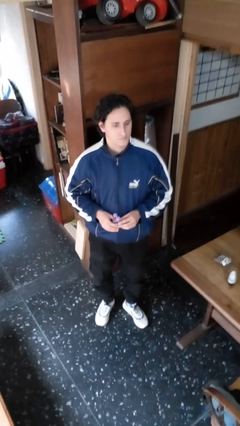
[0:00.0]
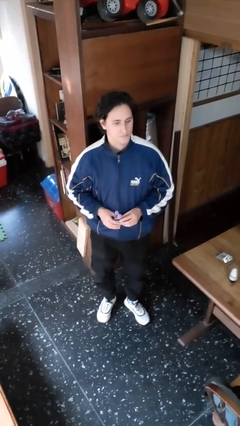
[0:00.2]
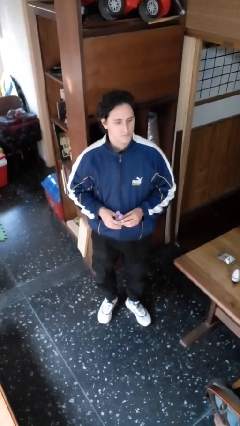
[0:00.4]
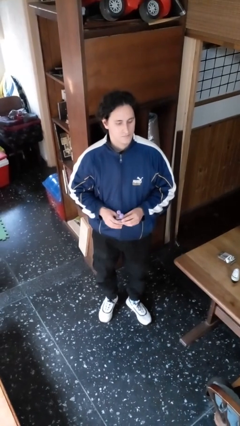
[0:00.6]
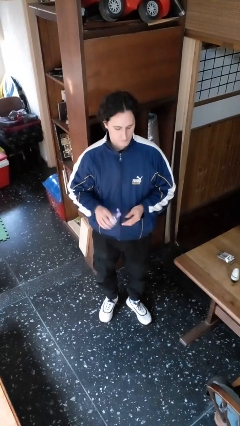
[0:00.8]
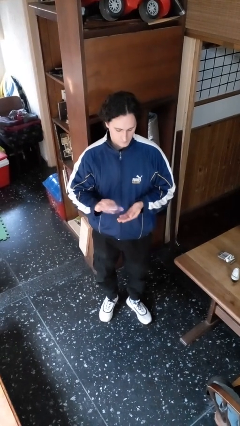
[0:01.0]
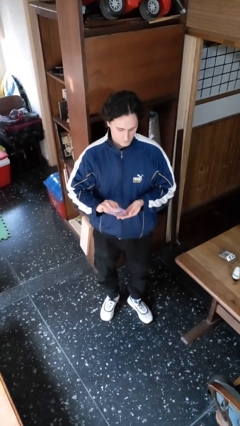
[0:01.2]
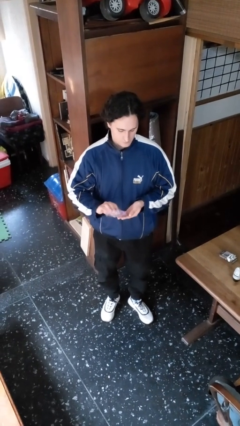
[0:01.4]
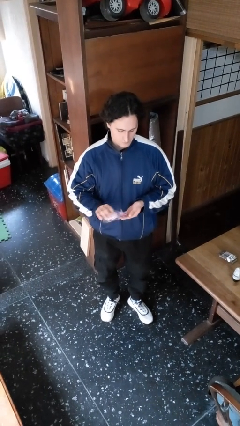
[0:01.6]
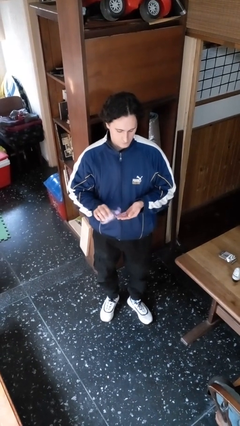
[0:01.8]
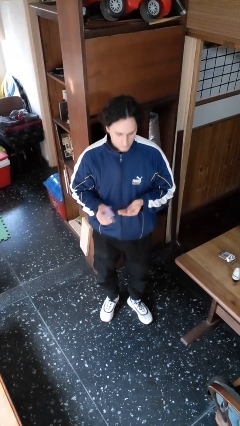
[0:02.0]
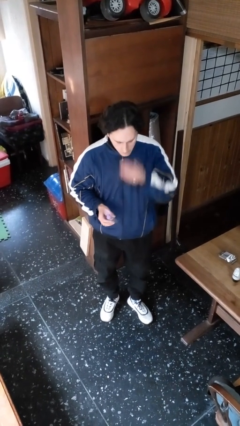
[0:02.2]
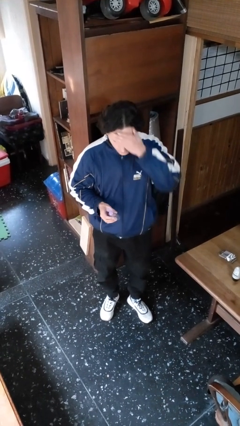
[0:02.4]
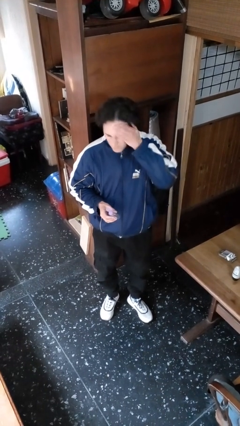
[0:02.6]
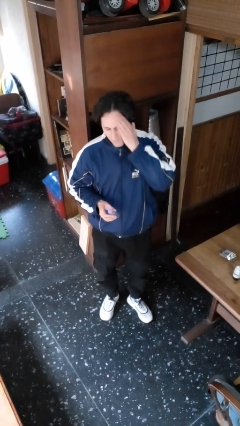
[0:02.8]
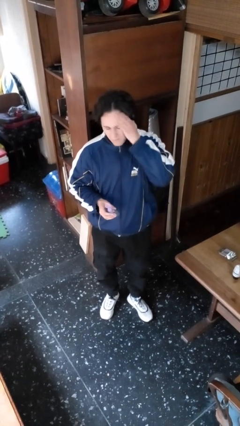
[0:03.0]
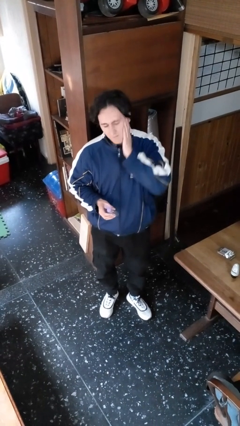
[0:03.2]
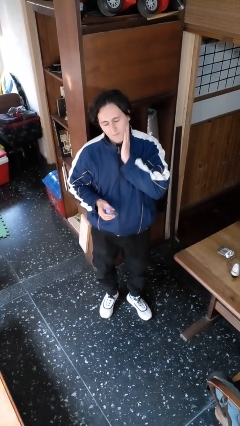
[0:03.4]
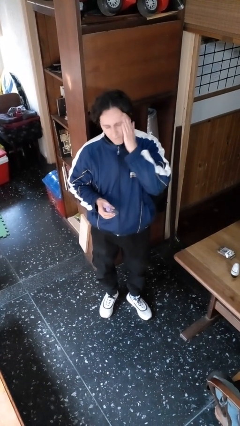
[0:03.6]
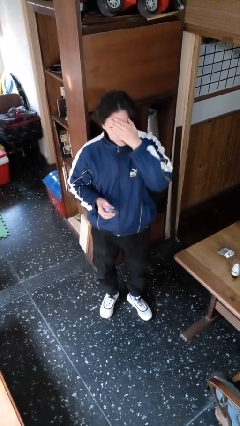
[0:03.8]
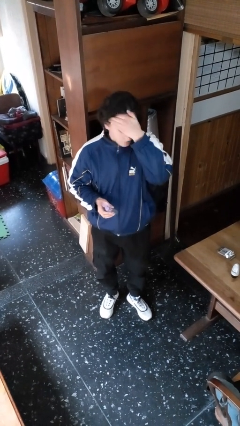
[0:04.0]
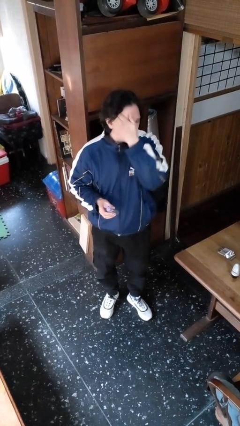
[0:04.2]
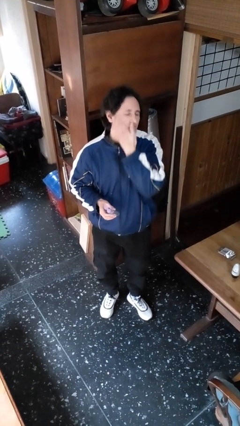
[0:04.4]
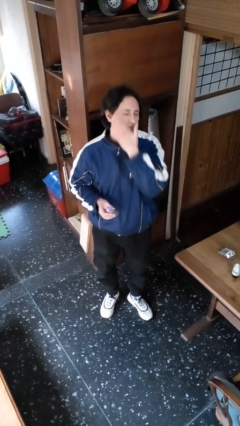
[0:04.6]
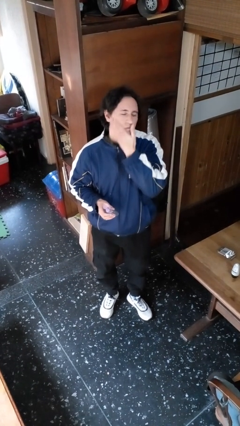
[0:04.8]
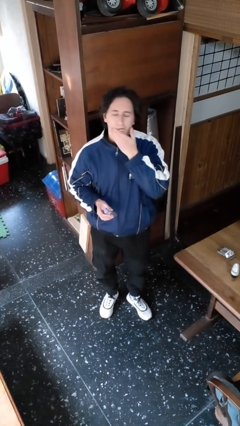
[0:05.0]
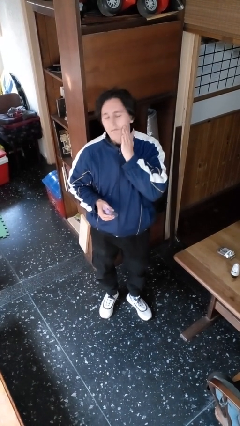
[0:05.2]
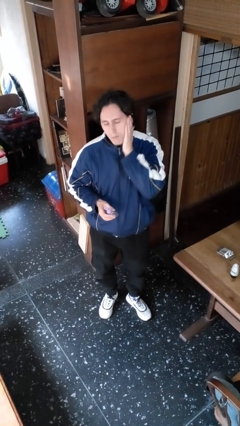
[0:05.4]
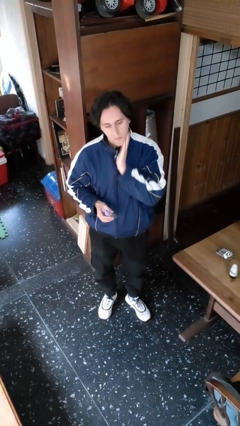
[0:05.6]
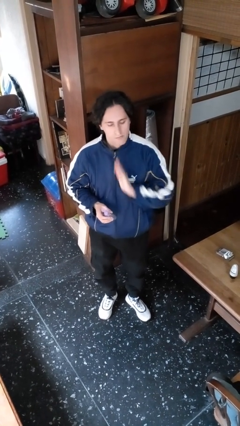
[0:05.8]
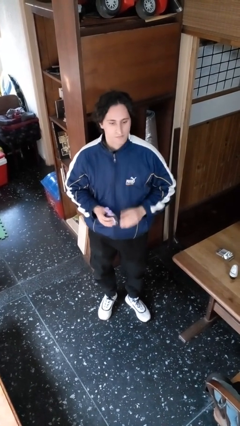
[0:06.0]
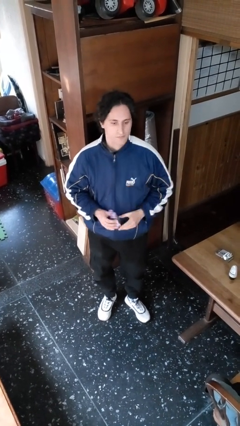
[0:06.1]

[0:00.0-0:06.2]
person applies facial moisturizer

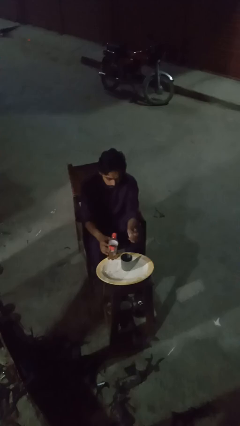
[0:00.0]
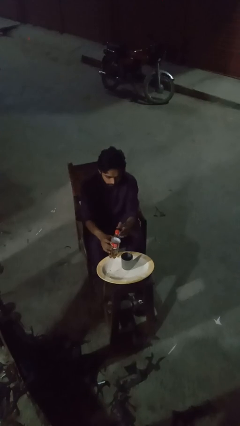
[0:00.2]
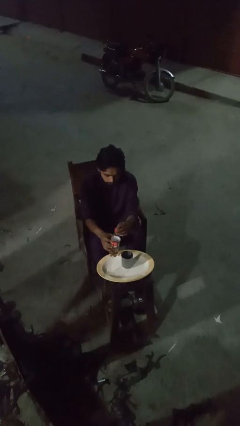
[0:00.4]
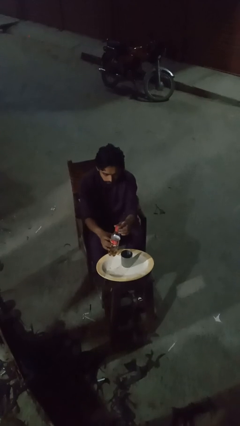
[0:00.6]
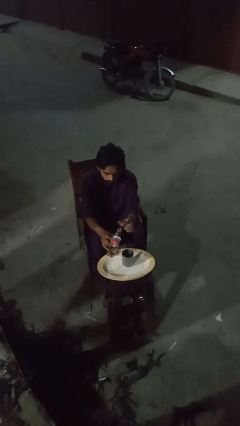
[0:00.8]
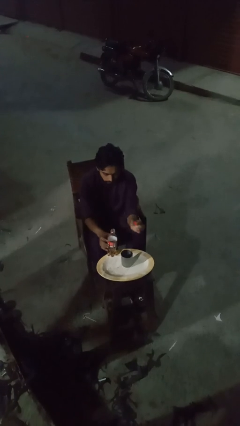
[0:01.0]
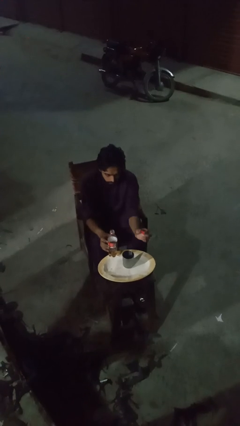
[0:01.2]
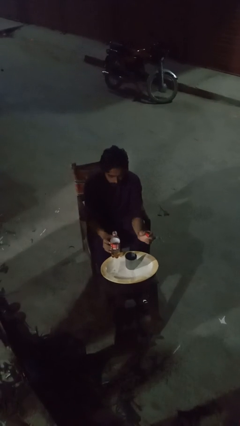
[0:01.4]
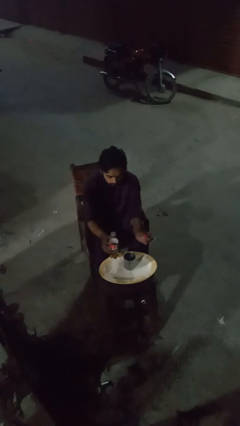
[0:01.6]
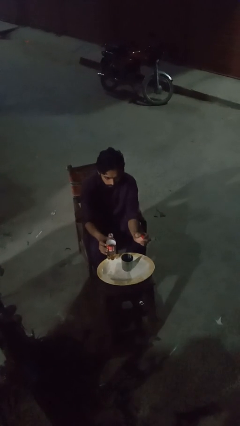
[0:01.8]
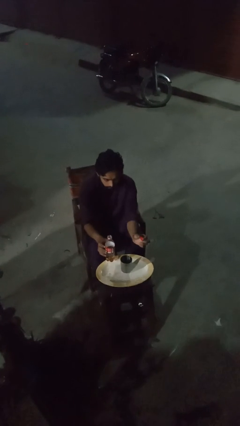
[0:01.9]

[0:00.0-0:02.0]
person unscrews lid from bottle

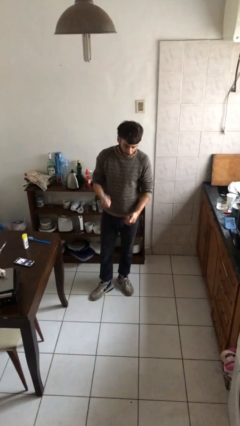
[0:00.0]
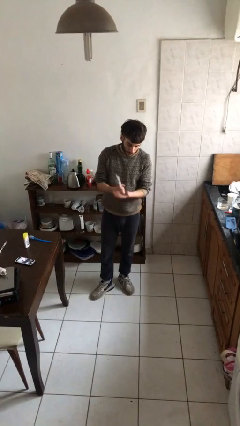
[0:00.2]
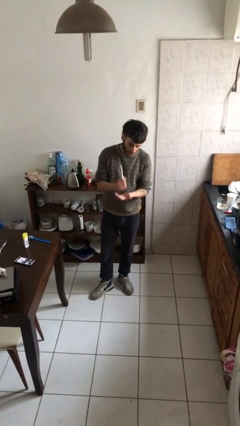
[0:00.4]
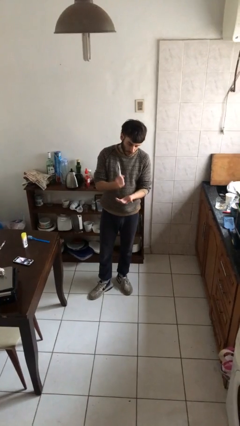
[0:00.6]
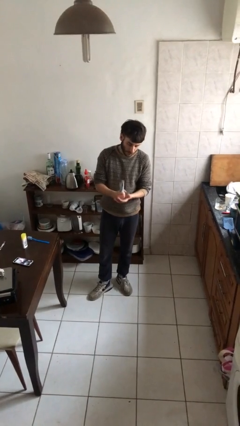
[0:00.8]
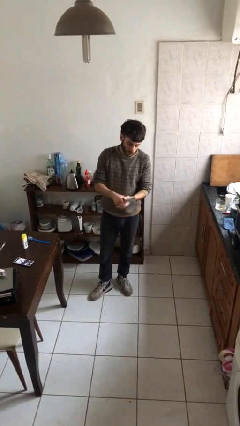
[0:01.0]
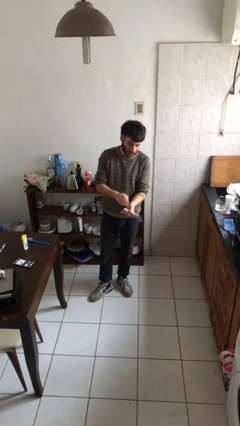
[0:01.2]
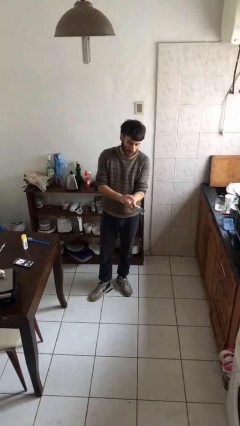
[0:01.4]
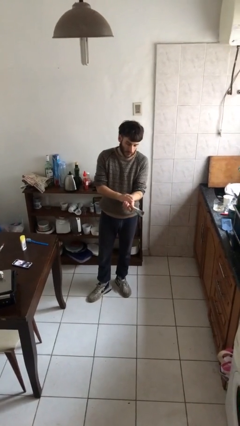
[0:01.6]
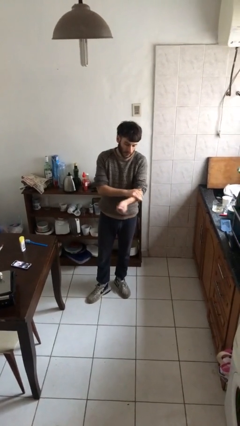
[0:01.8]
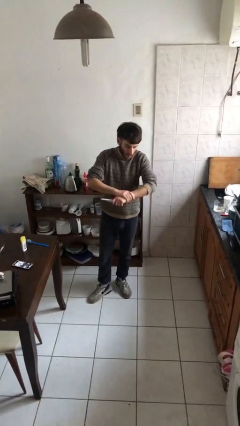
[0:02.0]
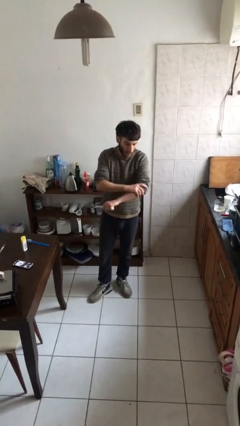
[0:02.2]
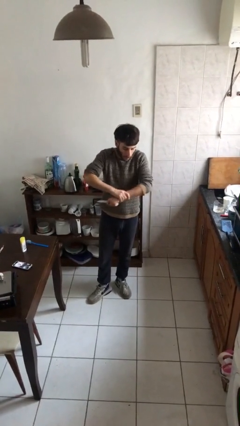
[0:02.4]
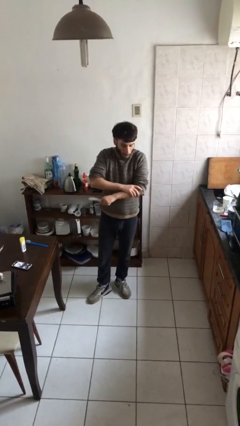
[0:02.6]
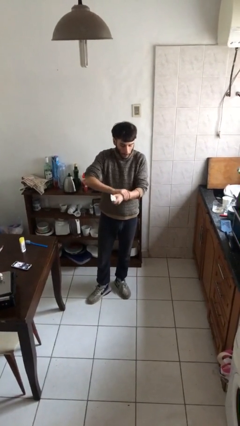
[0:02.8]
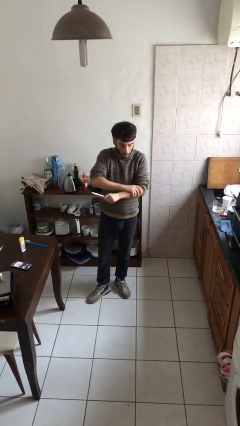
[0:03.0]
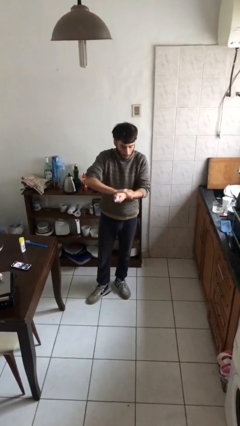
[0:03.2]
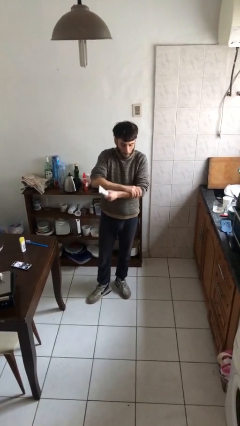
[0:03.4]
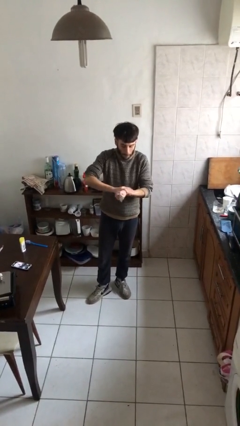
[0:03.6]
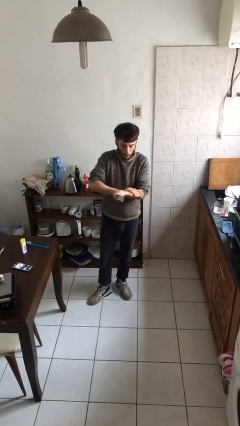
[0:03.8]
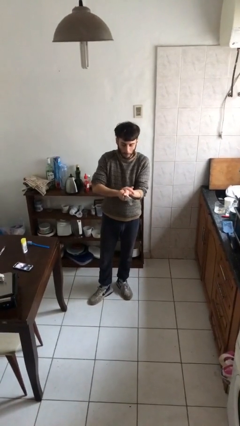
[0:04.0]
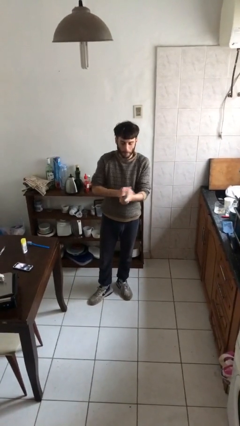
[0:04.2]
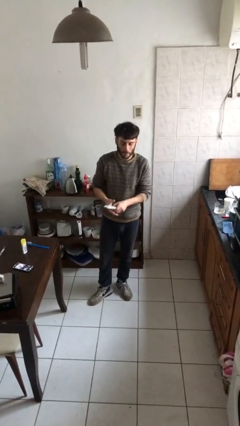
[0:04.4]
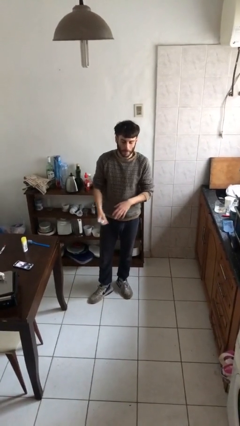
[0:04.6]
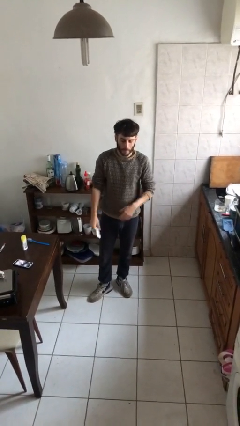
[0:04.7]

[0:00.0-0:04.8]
person applies sunscreen

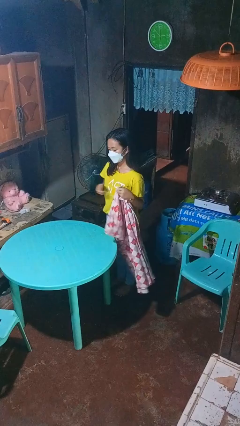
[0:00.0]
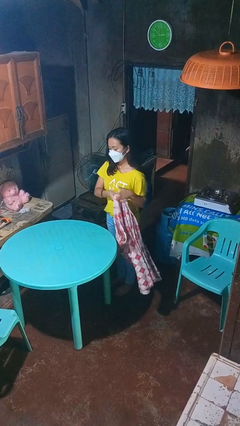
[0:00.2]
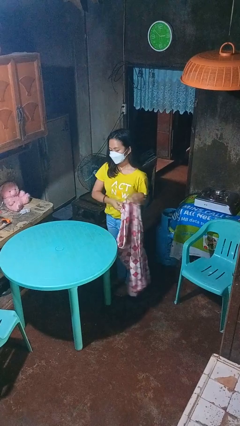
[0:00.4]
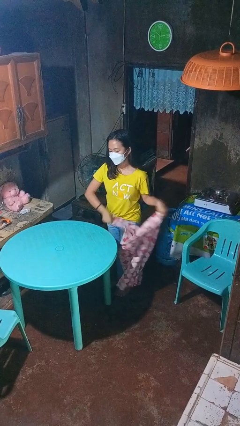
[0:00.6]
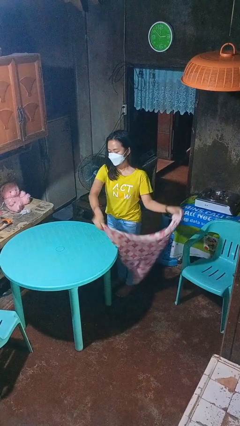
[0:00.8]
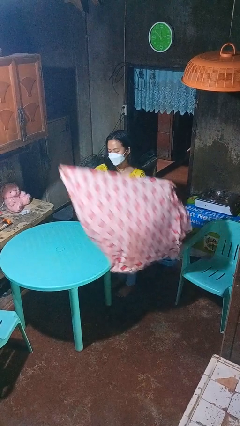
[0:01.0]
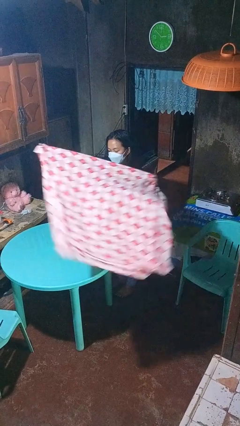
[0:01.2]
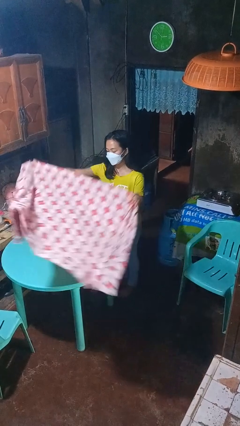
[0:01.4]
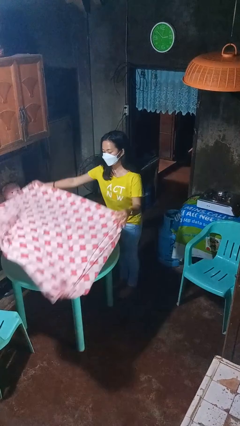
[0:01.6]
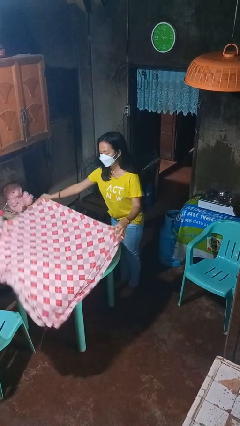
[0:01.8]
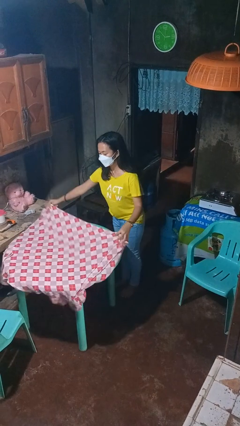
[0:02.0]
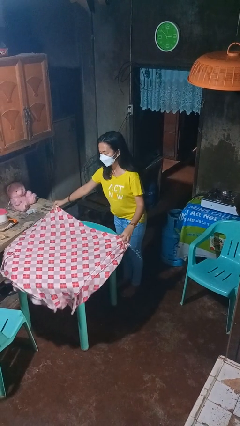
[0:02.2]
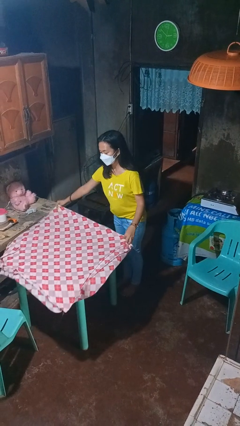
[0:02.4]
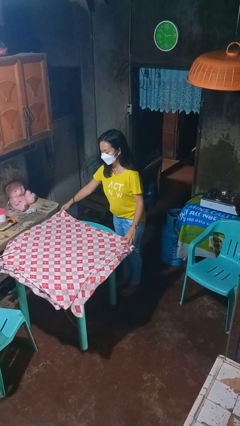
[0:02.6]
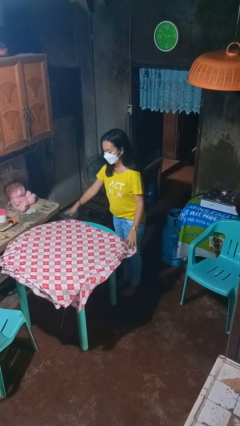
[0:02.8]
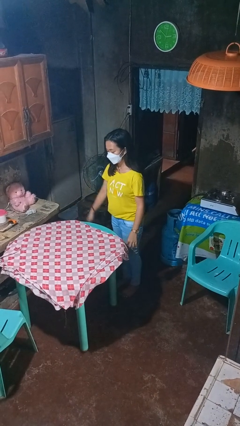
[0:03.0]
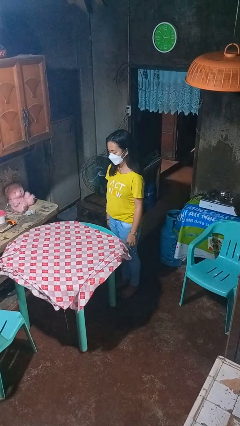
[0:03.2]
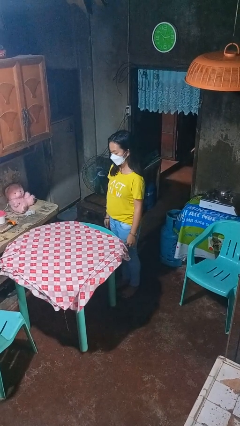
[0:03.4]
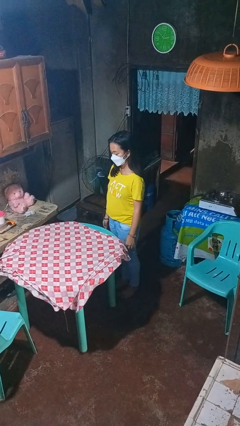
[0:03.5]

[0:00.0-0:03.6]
person spreads tablecloth

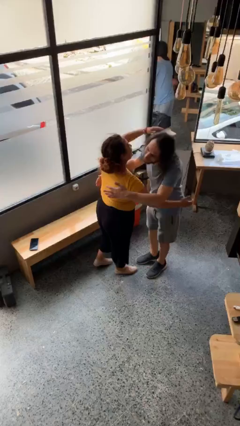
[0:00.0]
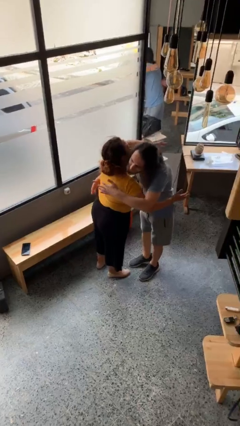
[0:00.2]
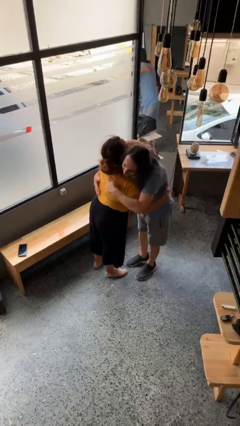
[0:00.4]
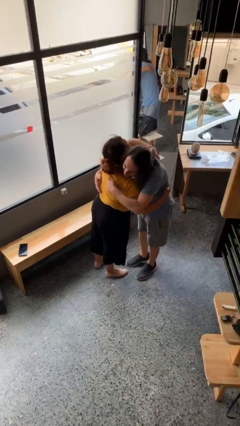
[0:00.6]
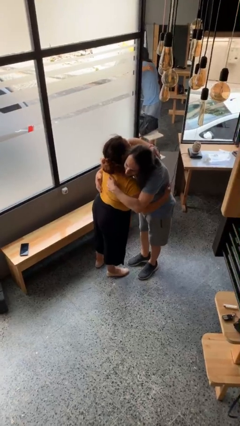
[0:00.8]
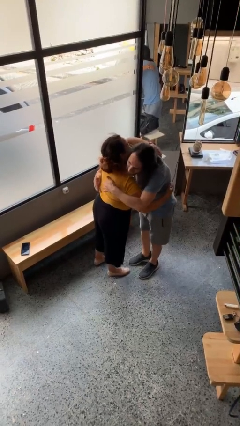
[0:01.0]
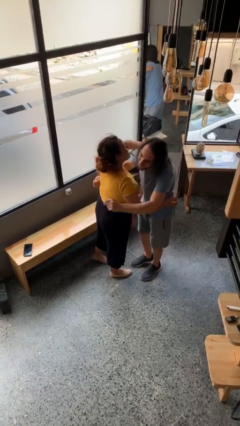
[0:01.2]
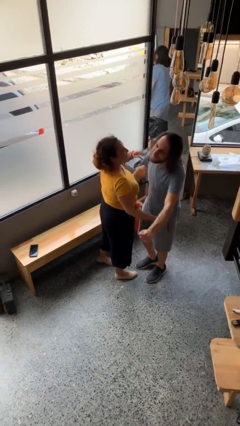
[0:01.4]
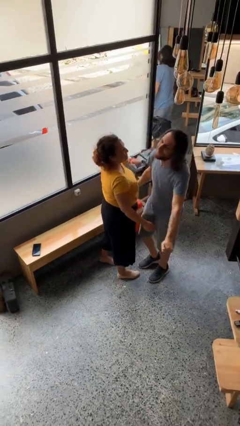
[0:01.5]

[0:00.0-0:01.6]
person embraces person
